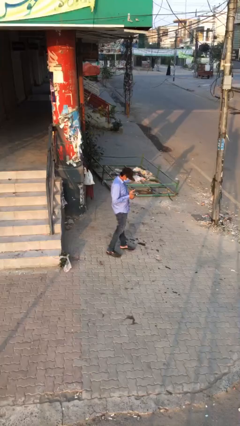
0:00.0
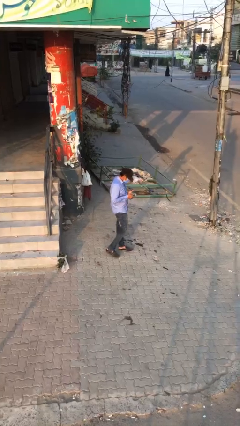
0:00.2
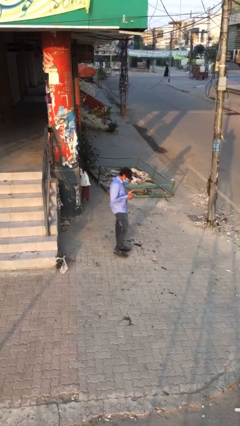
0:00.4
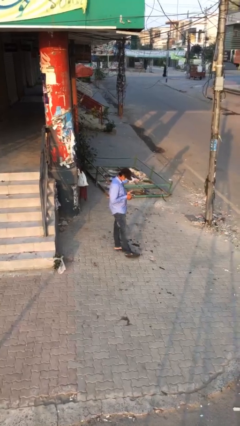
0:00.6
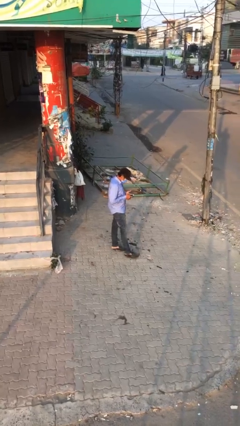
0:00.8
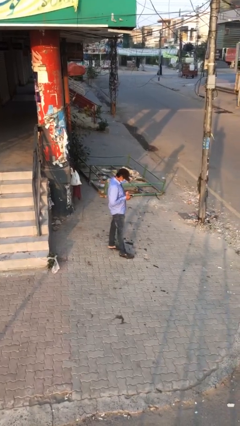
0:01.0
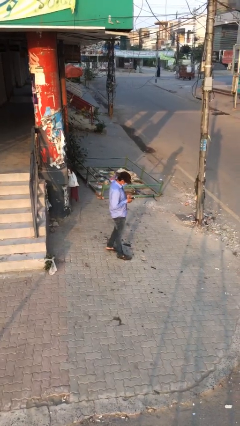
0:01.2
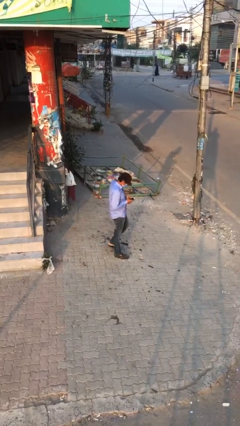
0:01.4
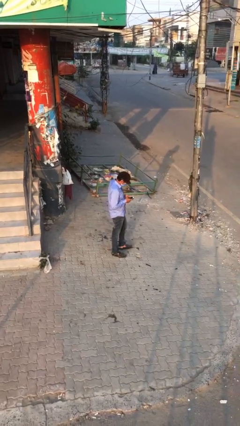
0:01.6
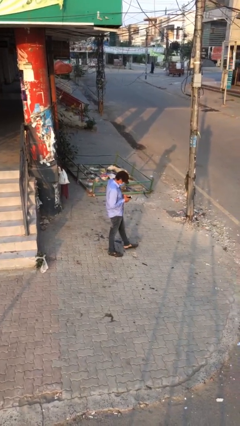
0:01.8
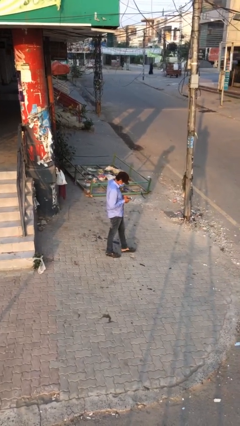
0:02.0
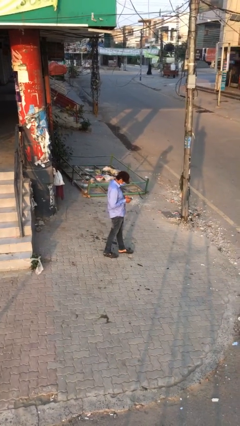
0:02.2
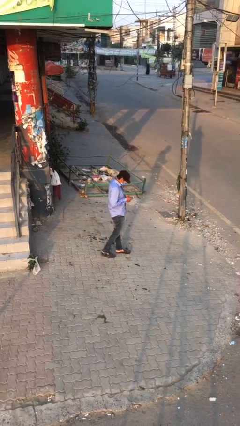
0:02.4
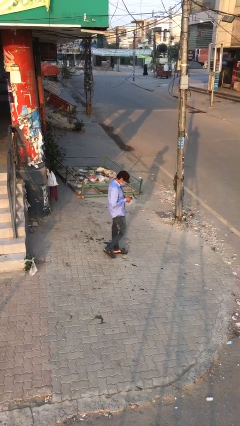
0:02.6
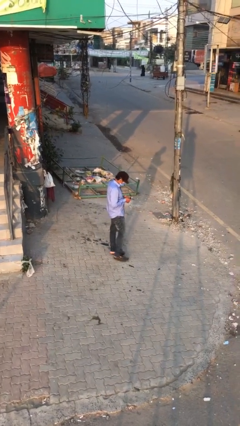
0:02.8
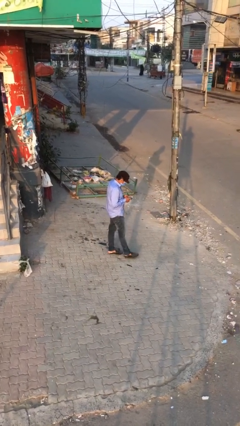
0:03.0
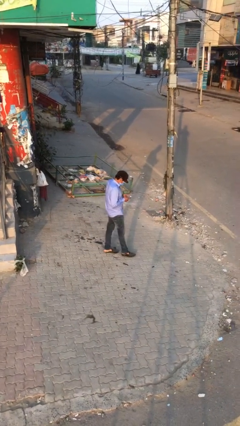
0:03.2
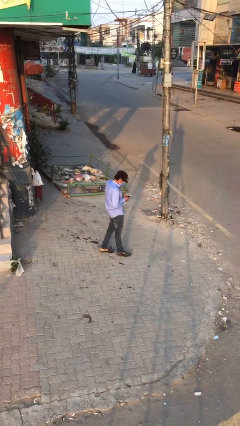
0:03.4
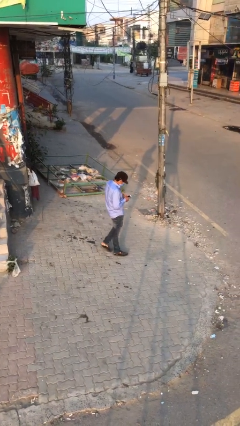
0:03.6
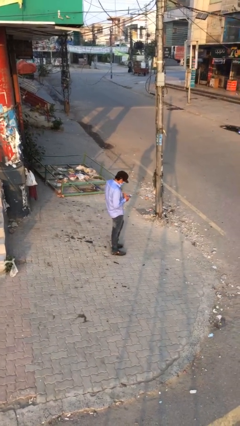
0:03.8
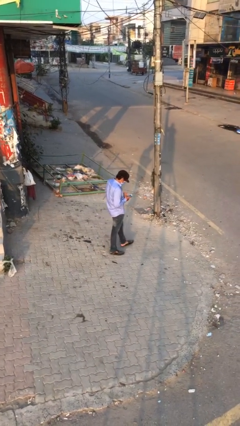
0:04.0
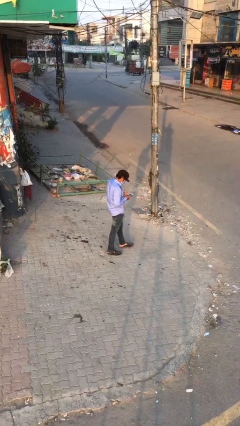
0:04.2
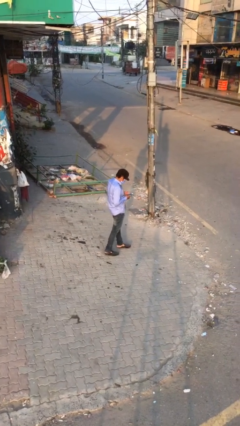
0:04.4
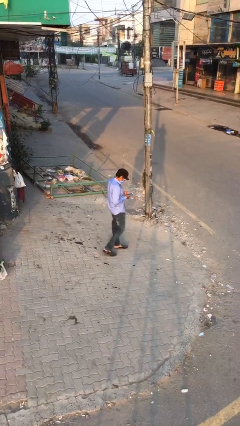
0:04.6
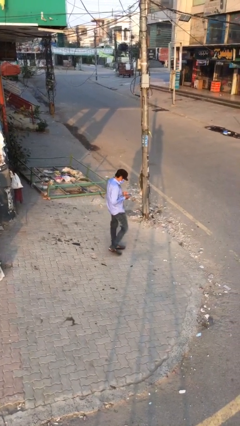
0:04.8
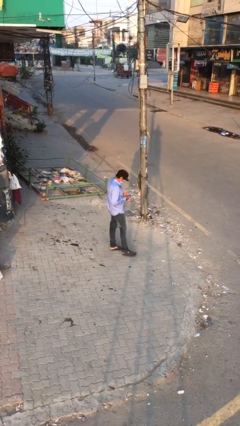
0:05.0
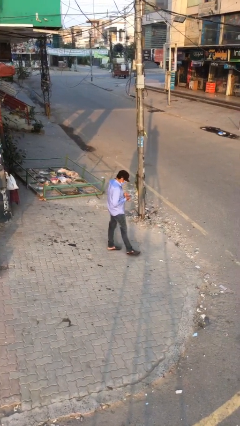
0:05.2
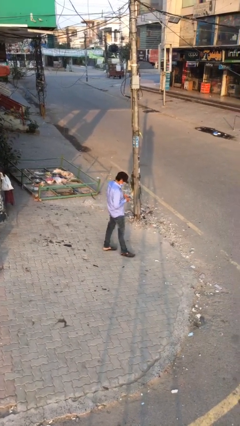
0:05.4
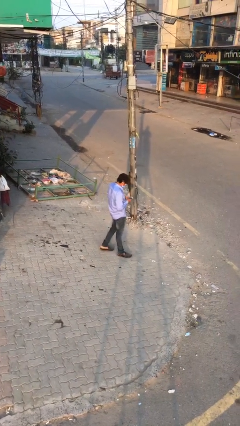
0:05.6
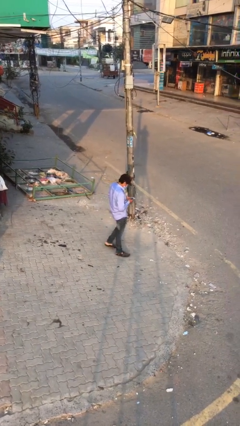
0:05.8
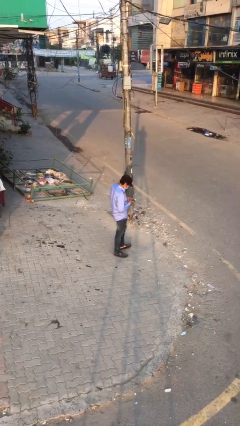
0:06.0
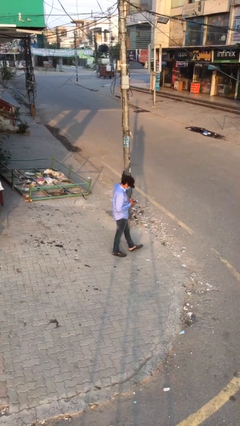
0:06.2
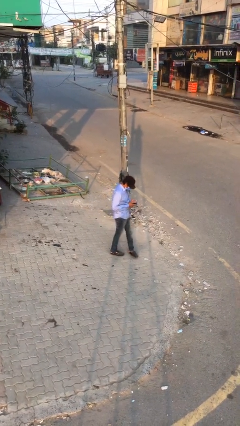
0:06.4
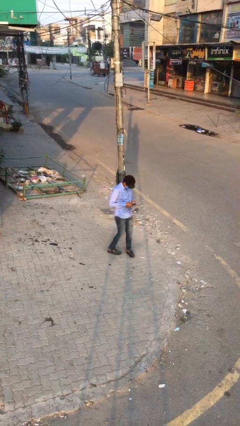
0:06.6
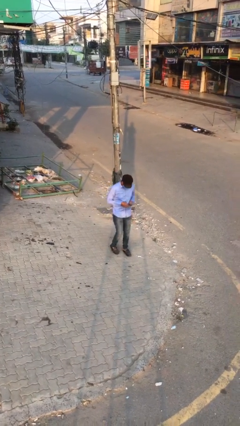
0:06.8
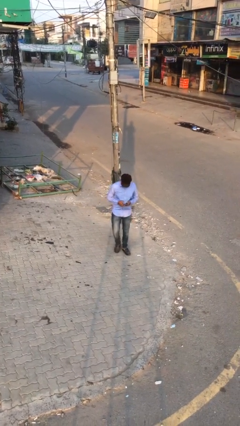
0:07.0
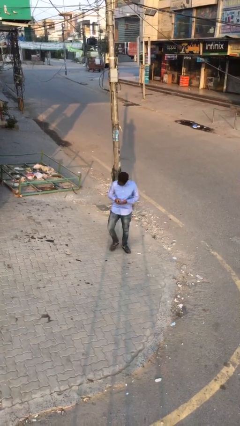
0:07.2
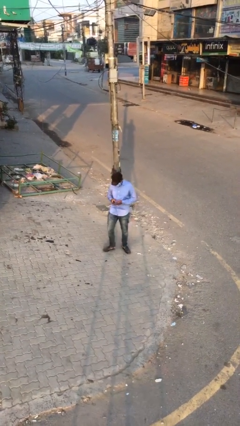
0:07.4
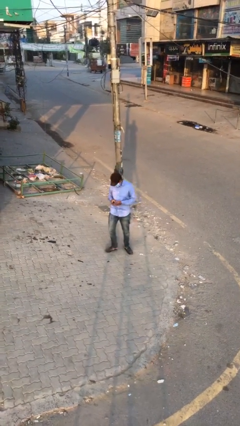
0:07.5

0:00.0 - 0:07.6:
person texts on phone

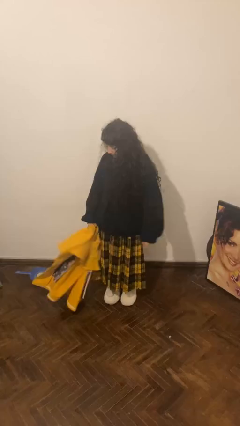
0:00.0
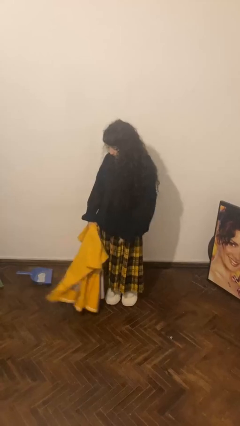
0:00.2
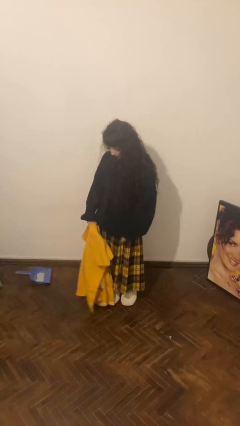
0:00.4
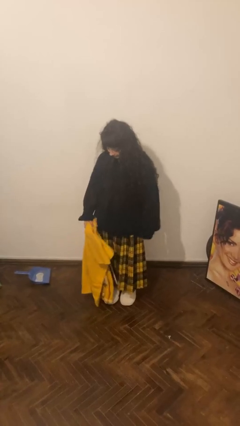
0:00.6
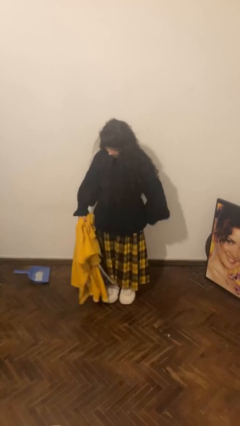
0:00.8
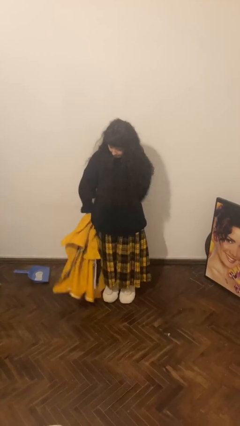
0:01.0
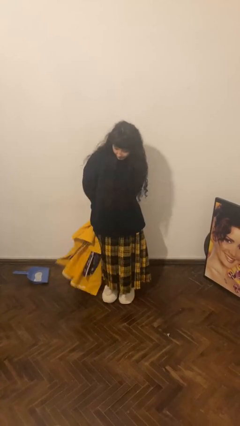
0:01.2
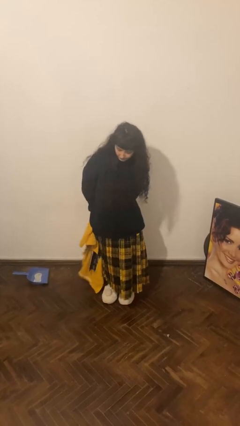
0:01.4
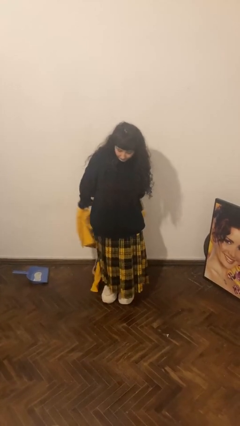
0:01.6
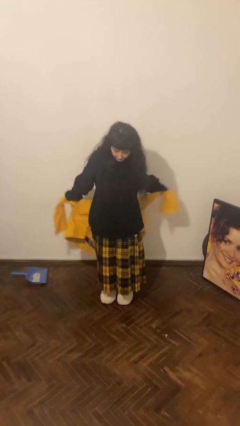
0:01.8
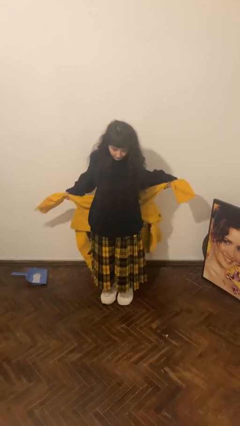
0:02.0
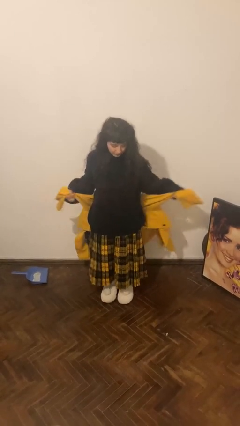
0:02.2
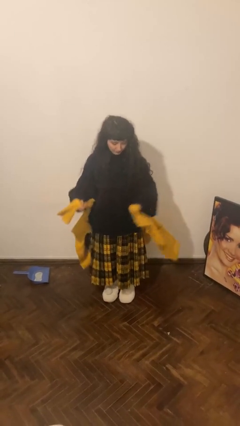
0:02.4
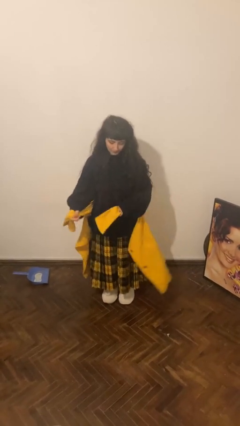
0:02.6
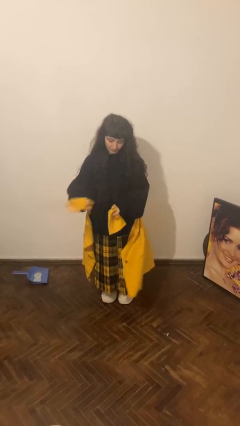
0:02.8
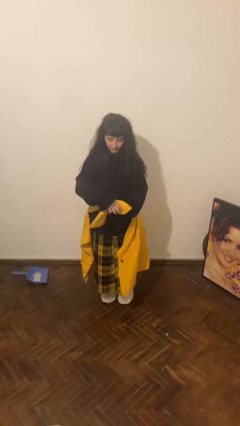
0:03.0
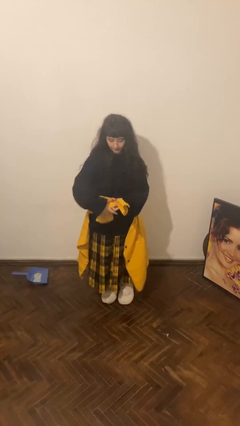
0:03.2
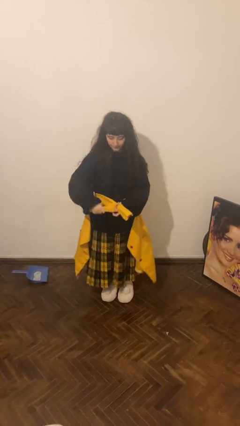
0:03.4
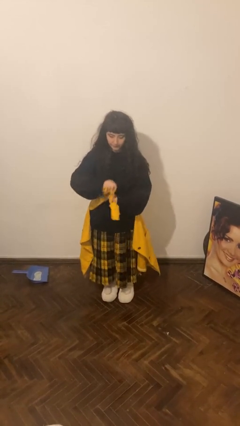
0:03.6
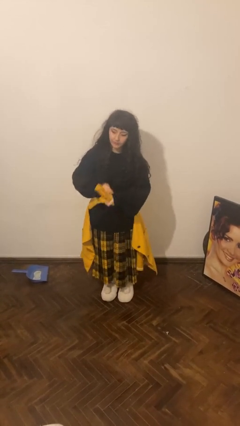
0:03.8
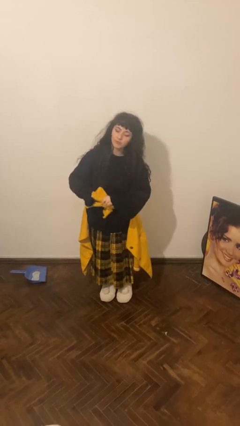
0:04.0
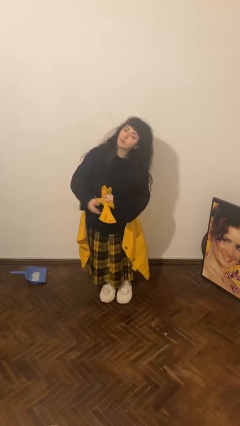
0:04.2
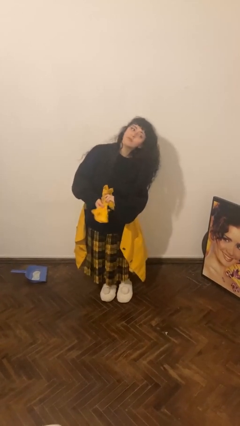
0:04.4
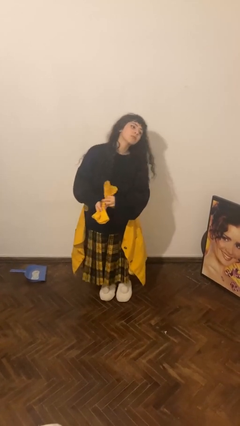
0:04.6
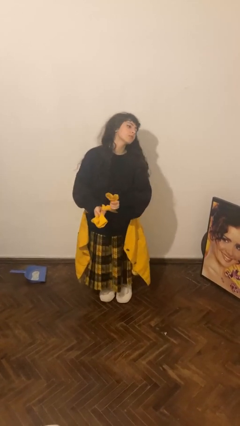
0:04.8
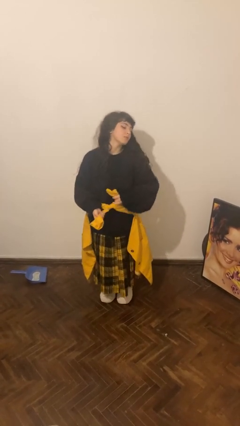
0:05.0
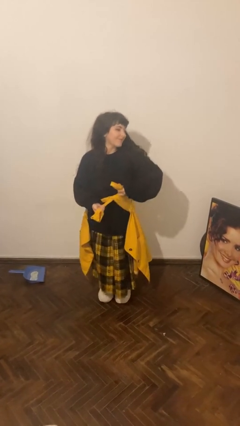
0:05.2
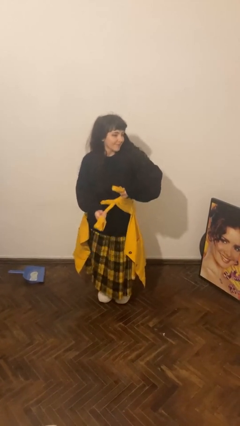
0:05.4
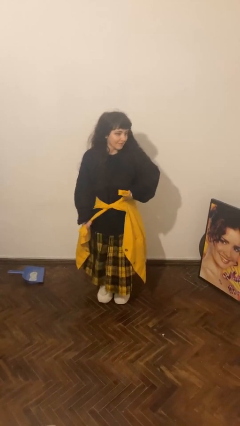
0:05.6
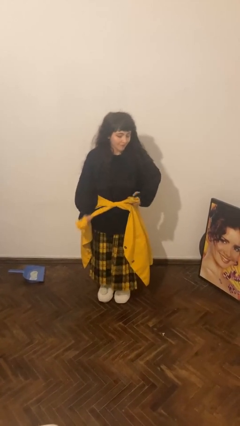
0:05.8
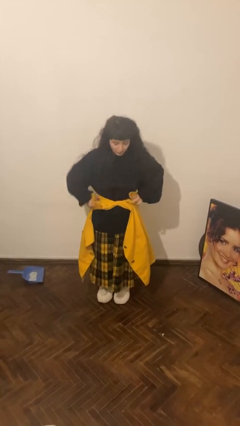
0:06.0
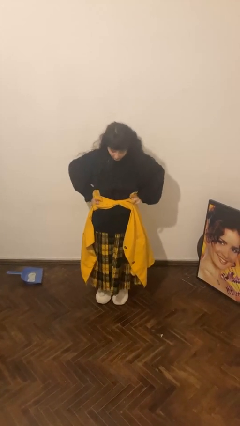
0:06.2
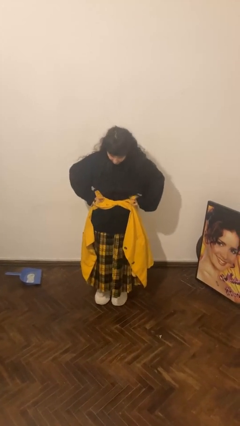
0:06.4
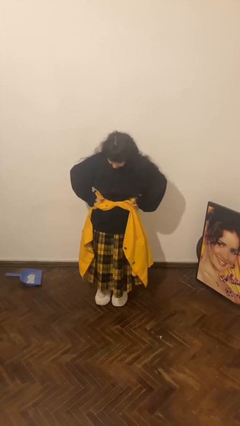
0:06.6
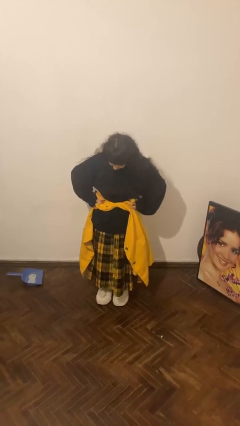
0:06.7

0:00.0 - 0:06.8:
person ties jacket around waist

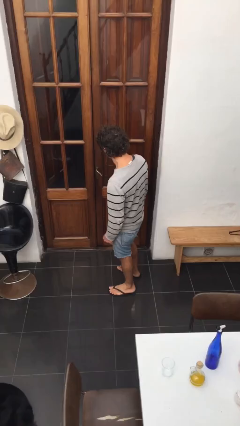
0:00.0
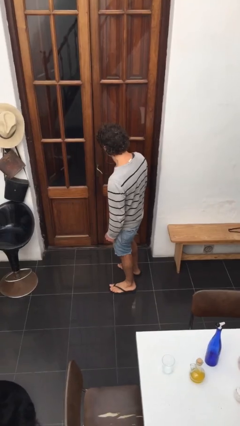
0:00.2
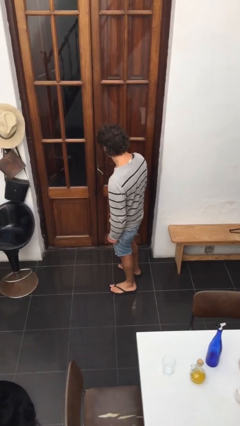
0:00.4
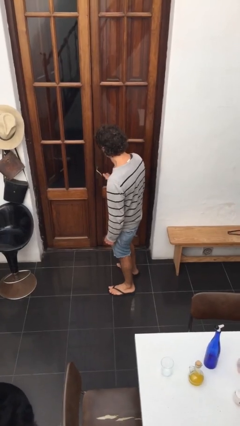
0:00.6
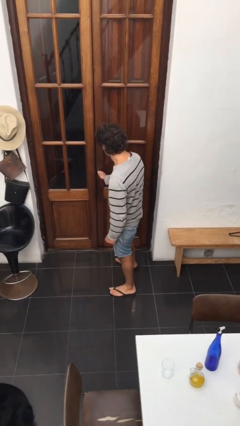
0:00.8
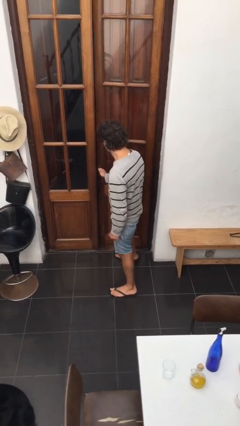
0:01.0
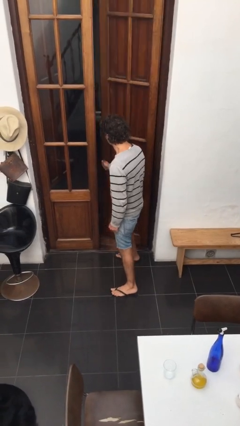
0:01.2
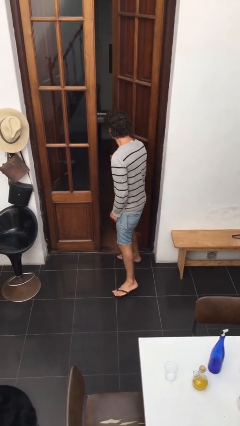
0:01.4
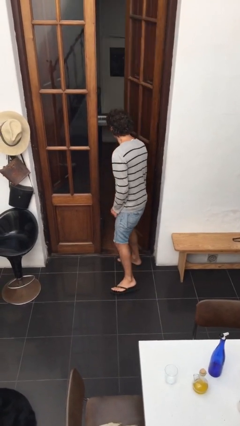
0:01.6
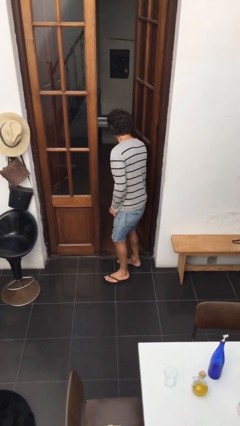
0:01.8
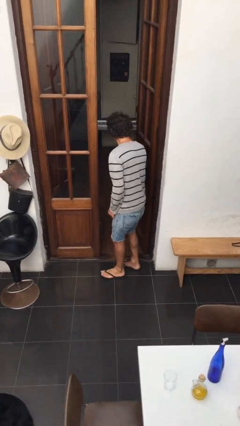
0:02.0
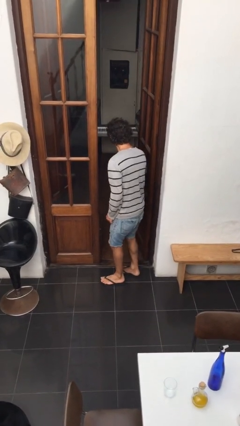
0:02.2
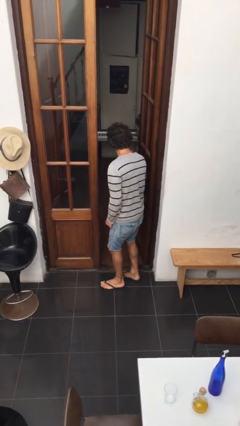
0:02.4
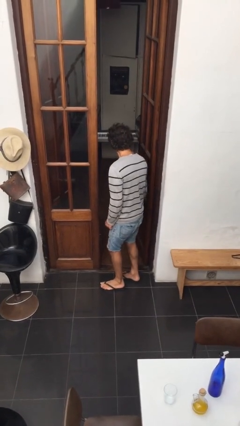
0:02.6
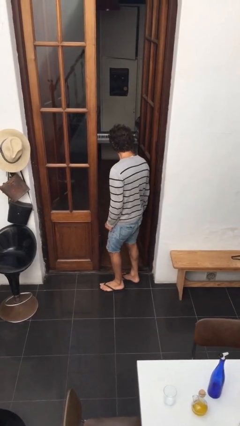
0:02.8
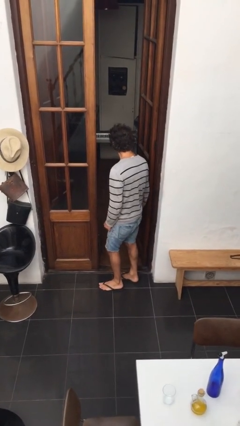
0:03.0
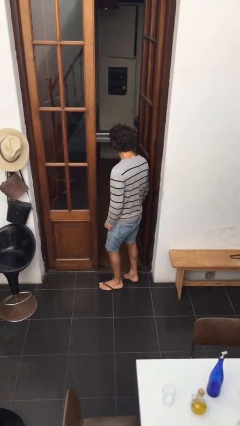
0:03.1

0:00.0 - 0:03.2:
person opens facility door

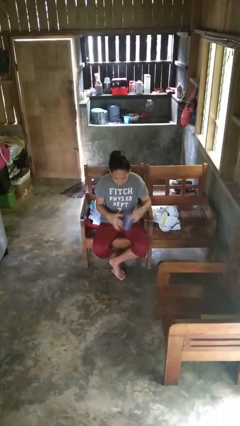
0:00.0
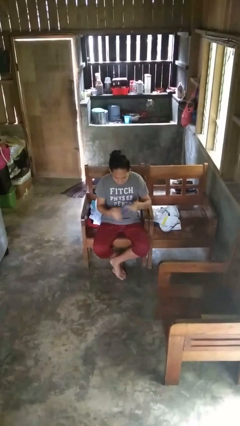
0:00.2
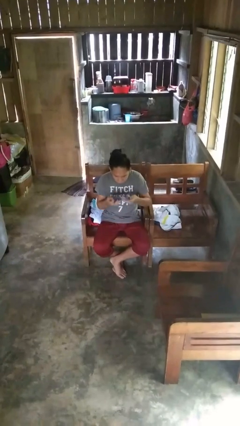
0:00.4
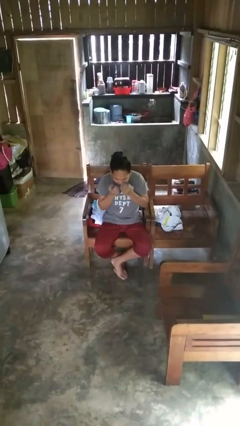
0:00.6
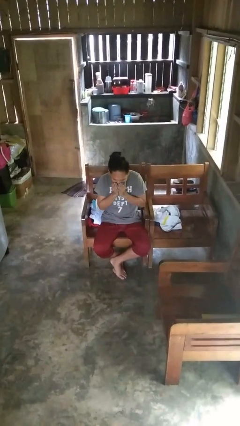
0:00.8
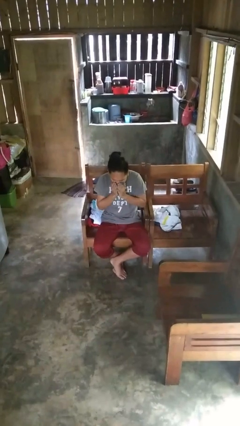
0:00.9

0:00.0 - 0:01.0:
person blows nose
